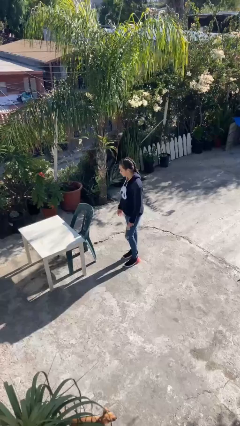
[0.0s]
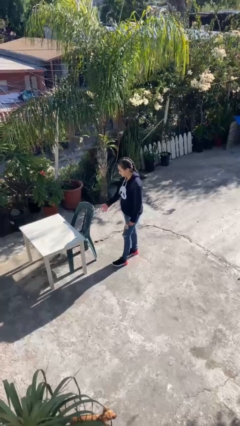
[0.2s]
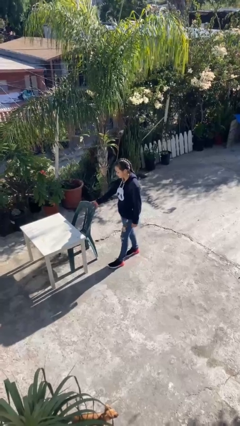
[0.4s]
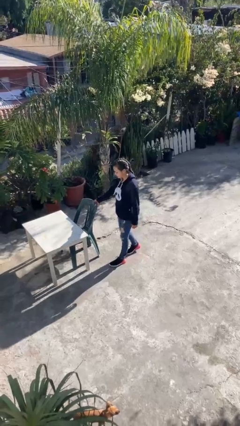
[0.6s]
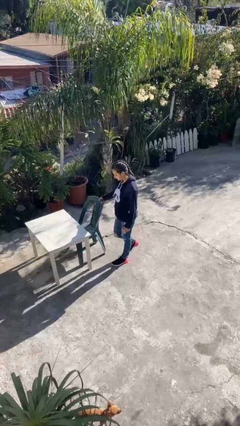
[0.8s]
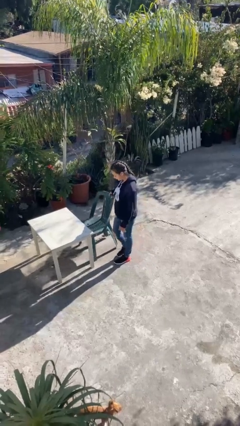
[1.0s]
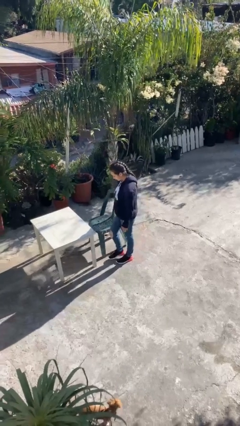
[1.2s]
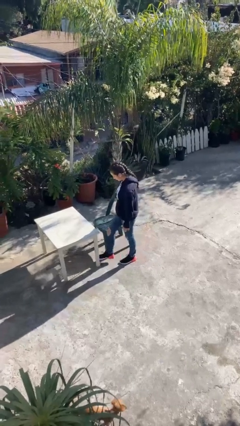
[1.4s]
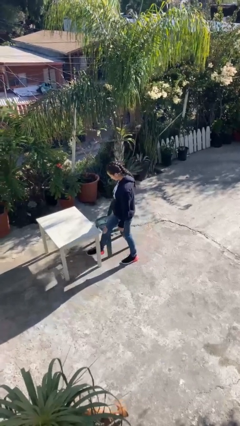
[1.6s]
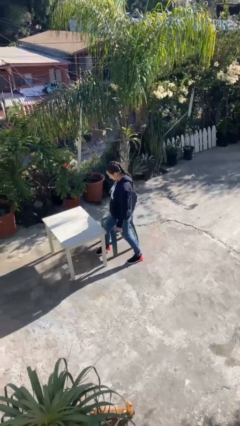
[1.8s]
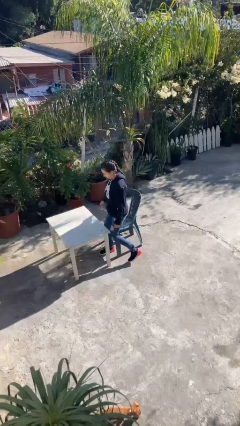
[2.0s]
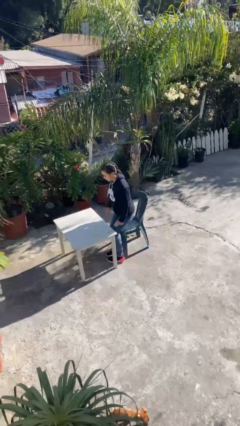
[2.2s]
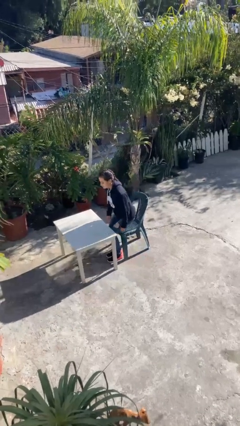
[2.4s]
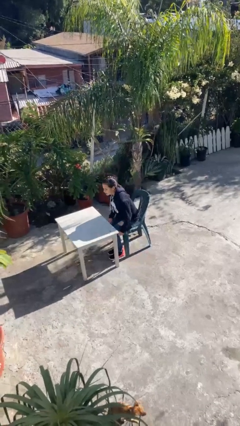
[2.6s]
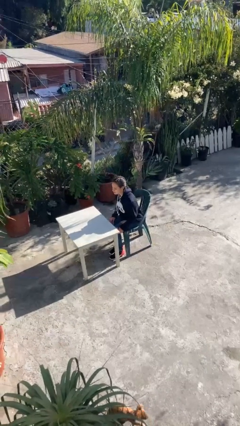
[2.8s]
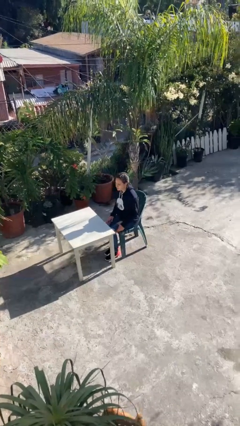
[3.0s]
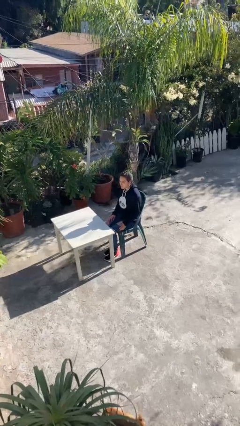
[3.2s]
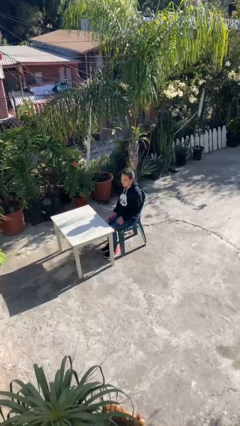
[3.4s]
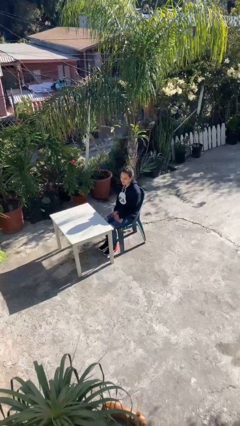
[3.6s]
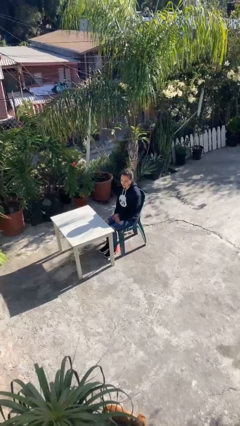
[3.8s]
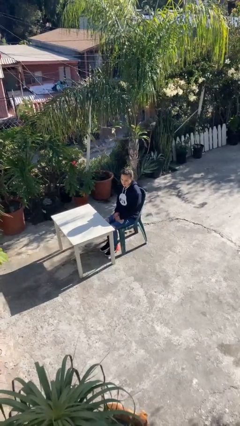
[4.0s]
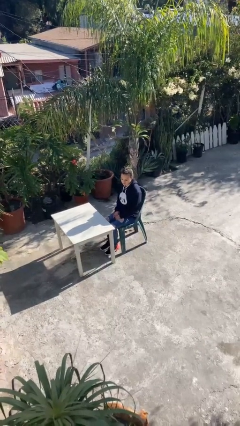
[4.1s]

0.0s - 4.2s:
person sits down

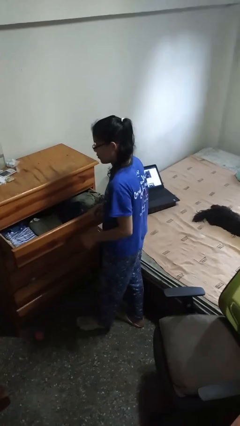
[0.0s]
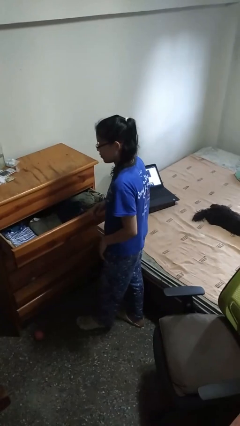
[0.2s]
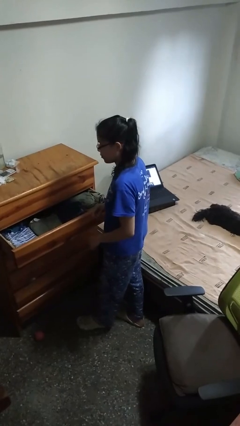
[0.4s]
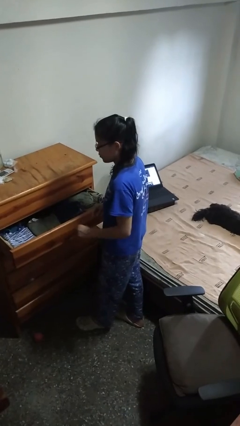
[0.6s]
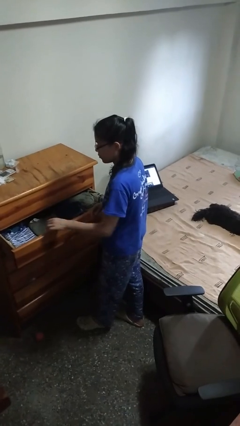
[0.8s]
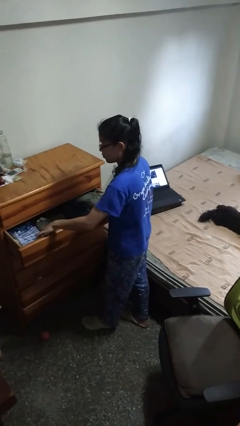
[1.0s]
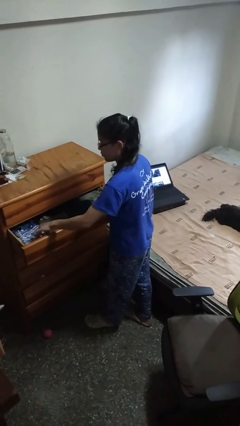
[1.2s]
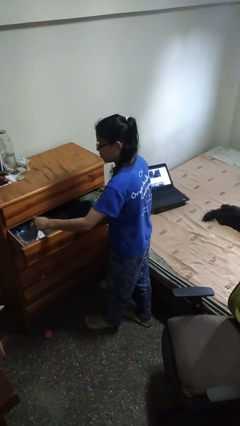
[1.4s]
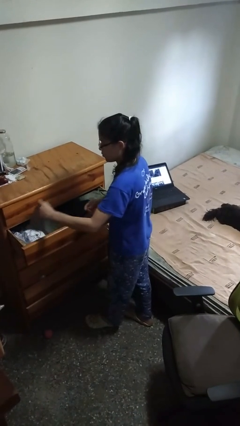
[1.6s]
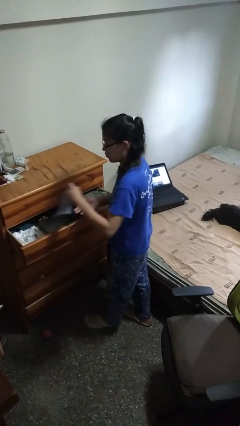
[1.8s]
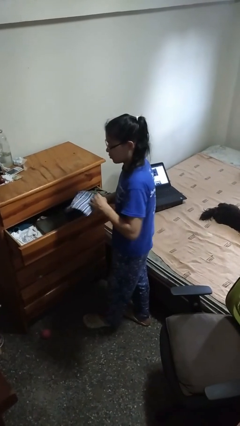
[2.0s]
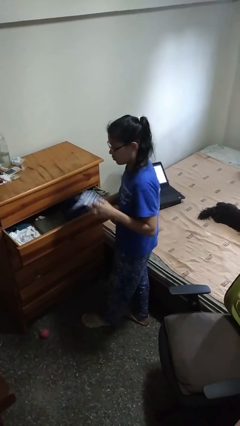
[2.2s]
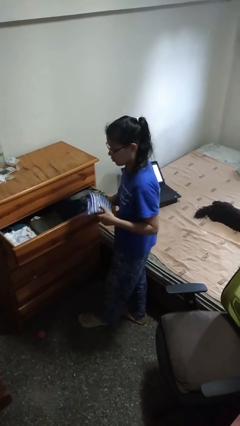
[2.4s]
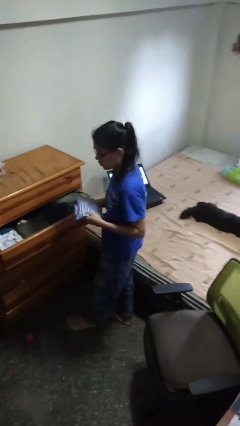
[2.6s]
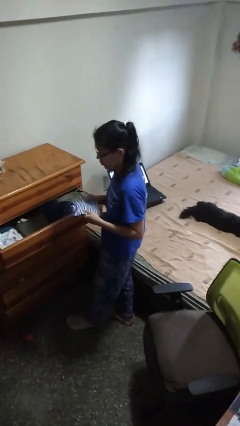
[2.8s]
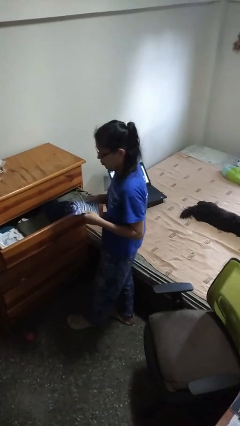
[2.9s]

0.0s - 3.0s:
person takes clothes from dresser

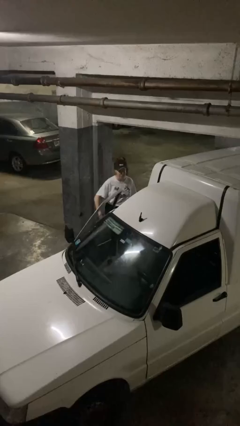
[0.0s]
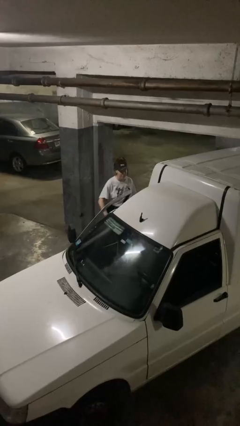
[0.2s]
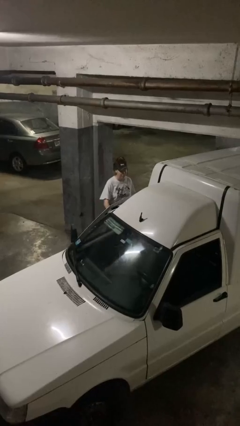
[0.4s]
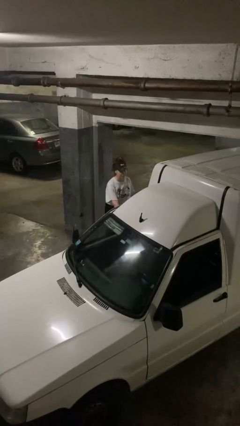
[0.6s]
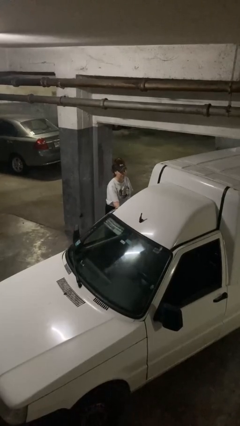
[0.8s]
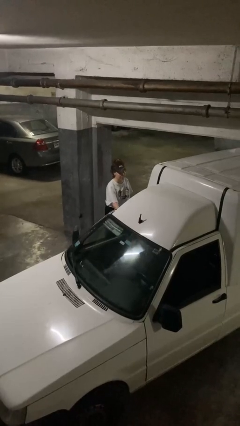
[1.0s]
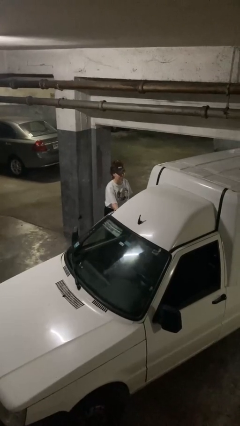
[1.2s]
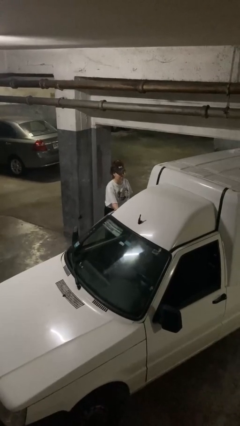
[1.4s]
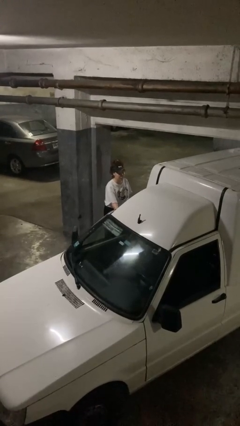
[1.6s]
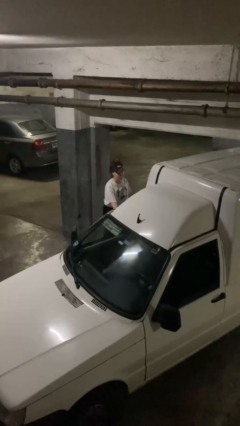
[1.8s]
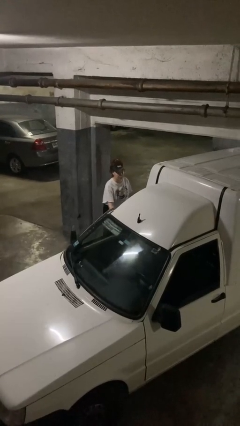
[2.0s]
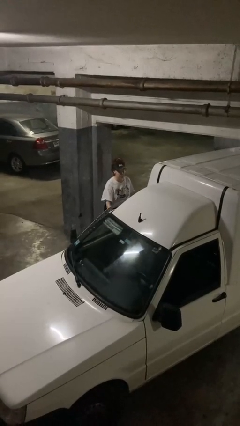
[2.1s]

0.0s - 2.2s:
person closes car door

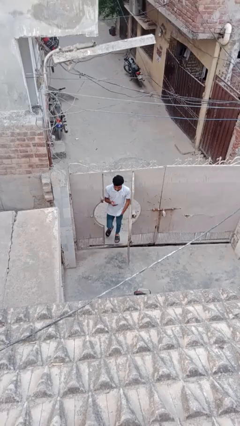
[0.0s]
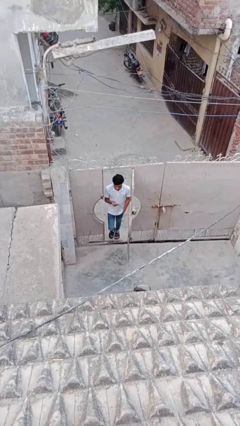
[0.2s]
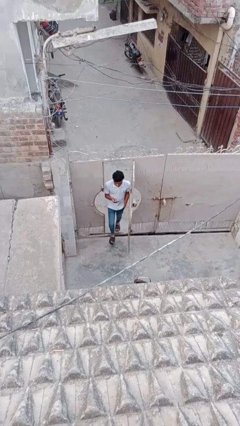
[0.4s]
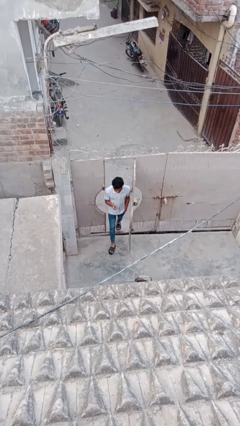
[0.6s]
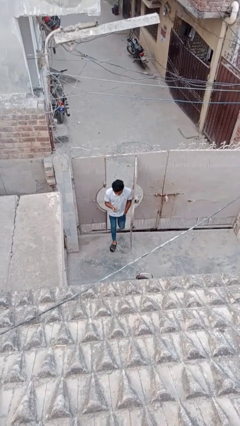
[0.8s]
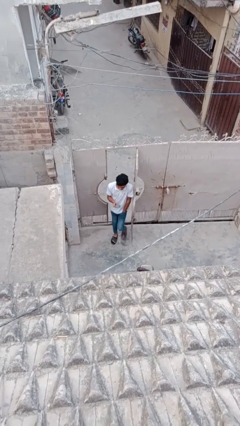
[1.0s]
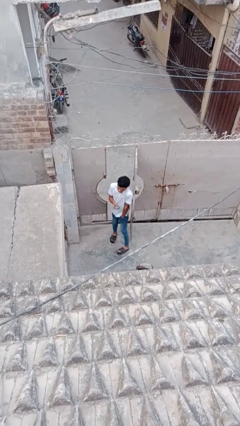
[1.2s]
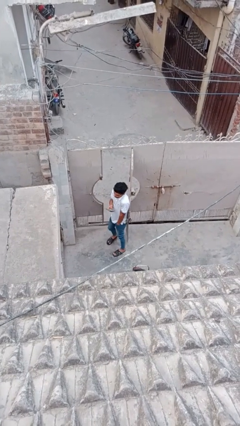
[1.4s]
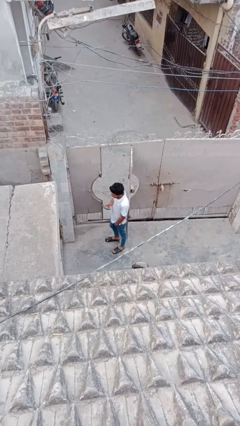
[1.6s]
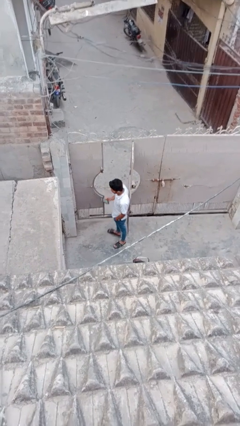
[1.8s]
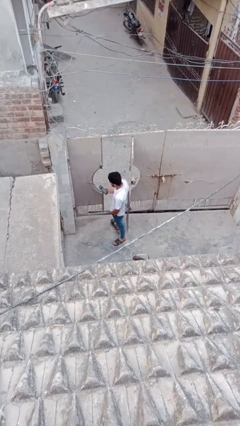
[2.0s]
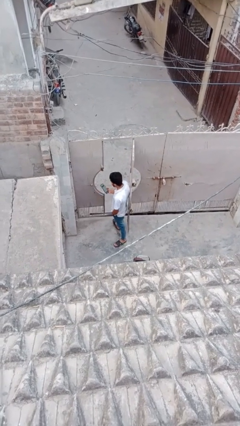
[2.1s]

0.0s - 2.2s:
person enters scene through structure

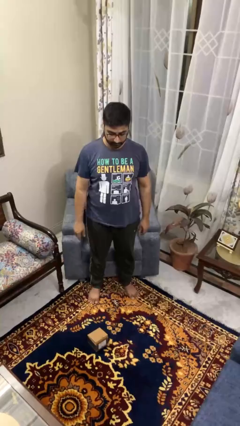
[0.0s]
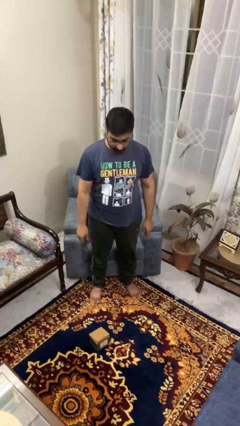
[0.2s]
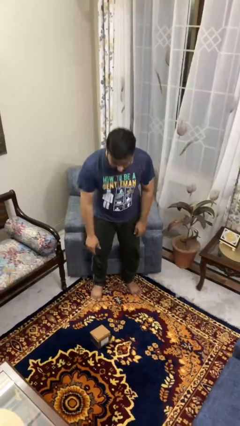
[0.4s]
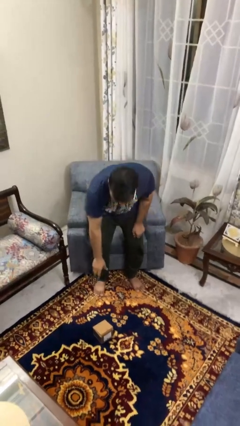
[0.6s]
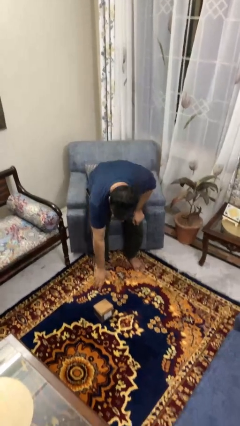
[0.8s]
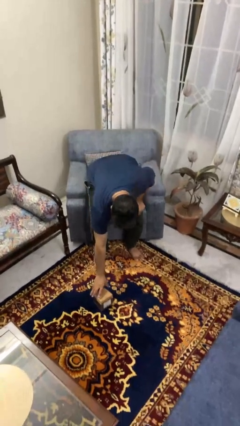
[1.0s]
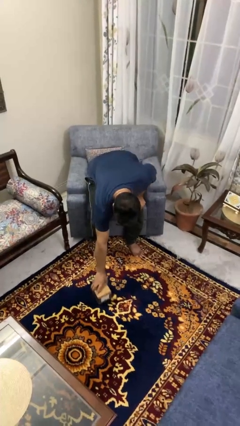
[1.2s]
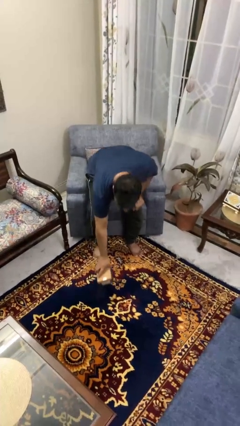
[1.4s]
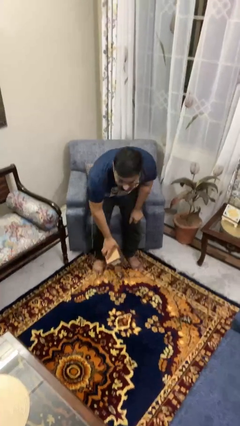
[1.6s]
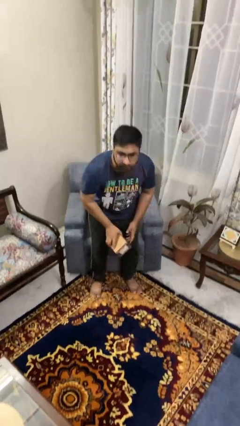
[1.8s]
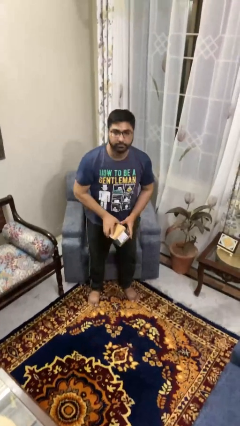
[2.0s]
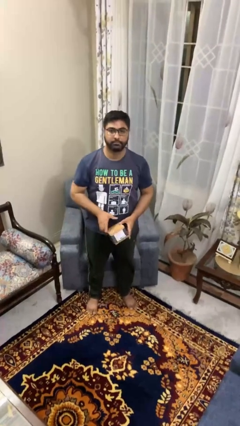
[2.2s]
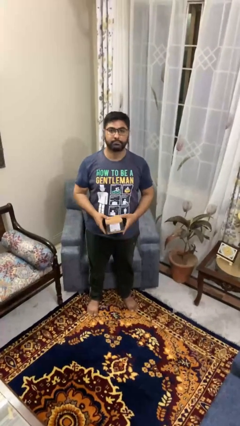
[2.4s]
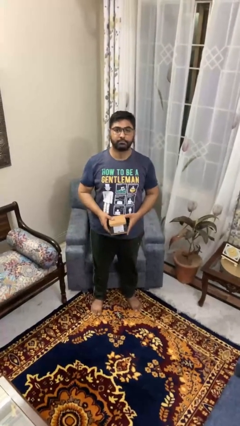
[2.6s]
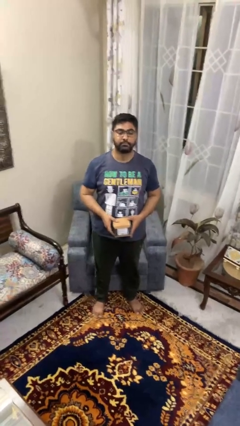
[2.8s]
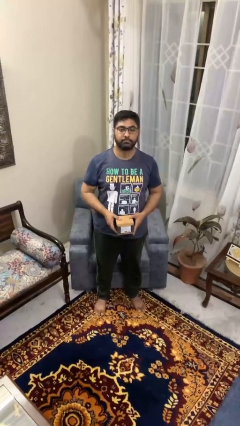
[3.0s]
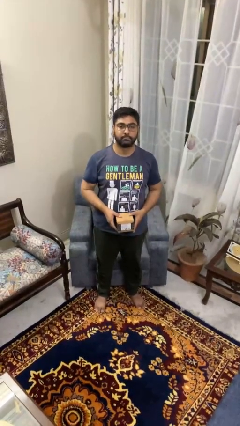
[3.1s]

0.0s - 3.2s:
person picks up object from floor

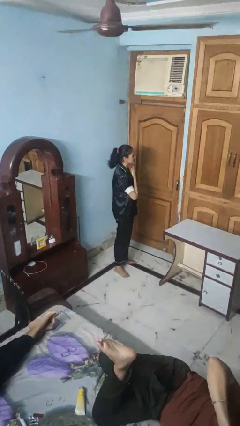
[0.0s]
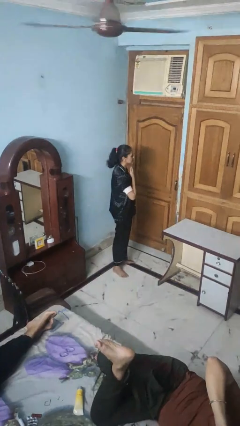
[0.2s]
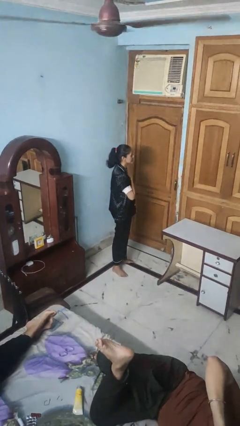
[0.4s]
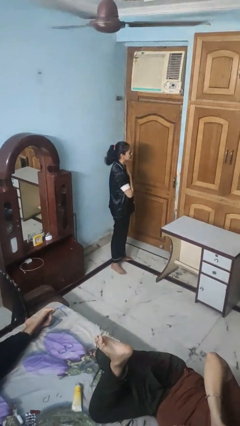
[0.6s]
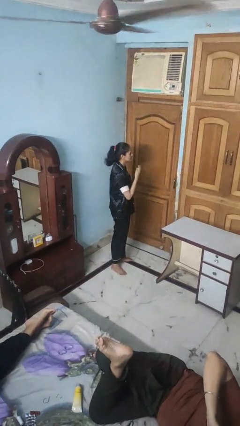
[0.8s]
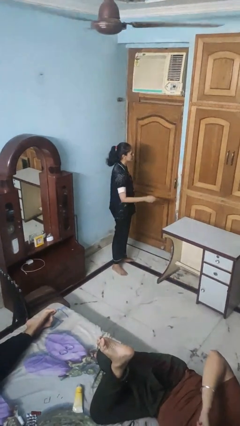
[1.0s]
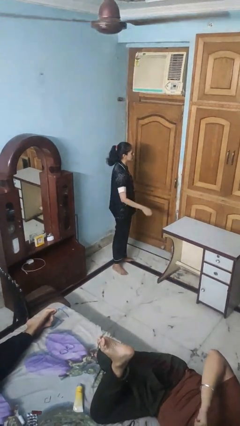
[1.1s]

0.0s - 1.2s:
person drums on chest

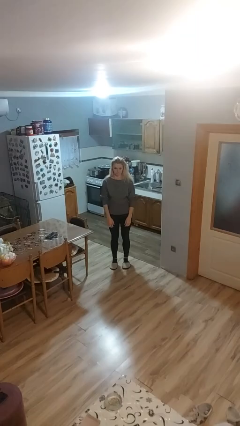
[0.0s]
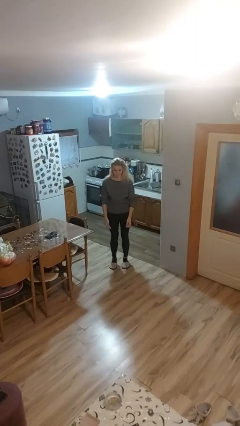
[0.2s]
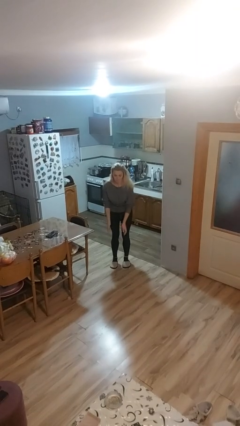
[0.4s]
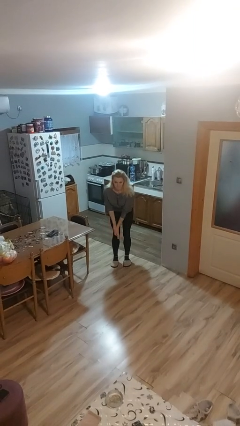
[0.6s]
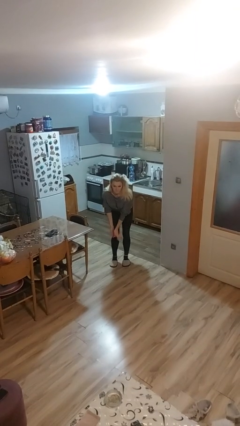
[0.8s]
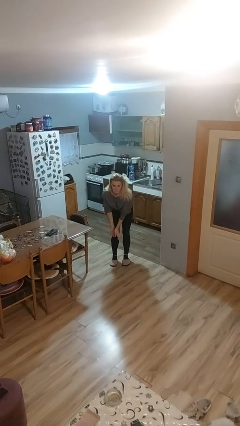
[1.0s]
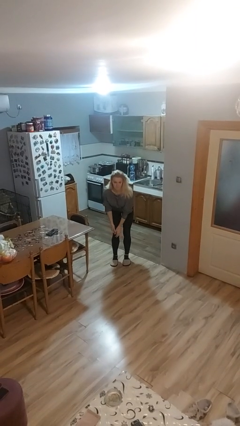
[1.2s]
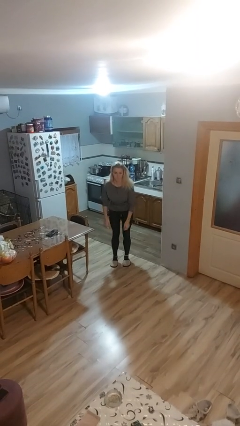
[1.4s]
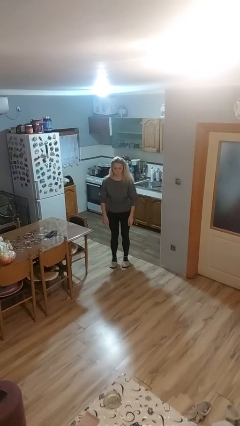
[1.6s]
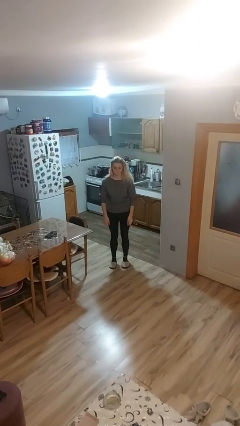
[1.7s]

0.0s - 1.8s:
person claps hands
